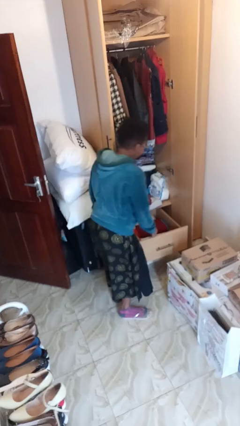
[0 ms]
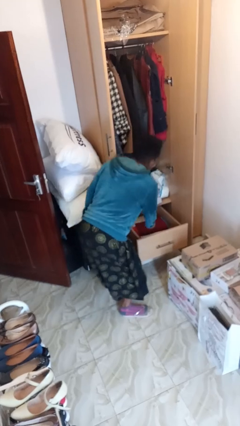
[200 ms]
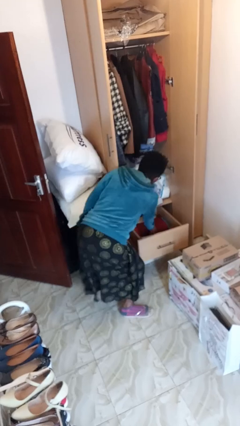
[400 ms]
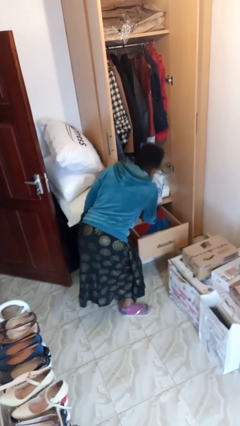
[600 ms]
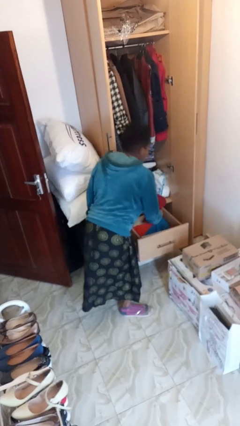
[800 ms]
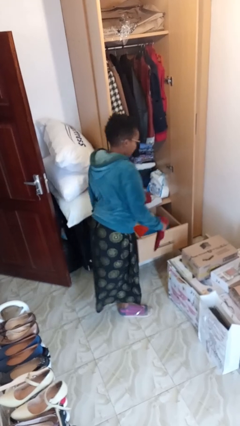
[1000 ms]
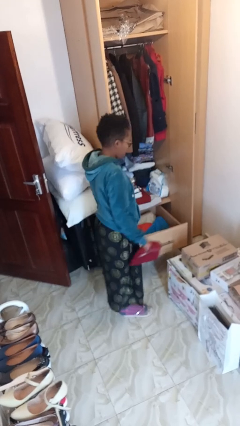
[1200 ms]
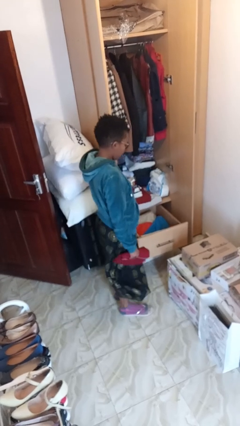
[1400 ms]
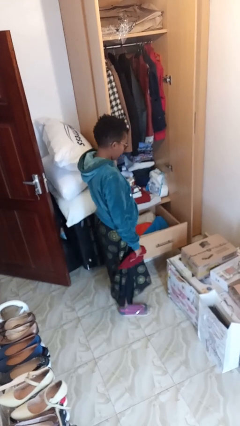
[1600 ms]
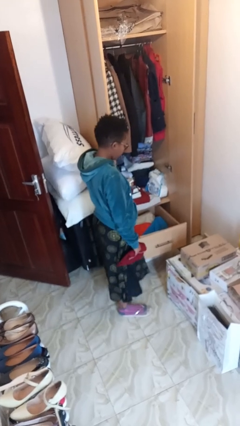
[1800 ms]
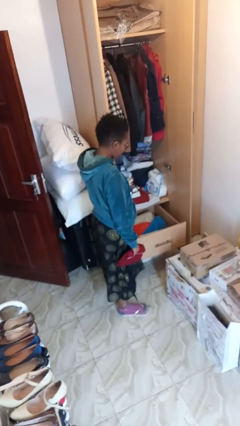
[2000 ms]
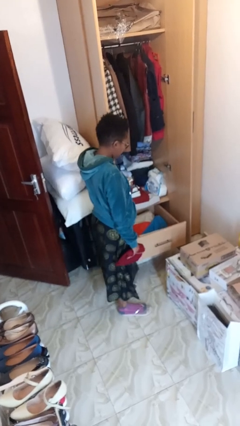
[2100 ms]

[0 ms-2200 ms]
person takes clothes from dresser

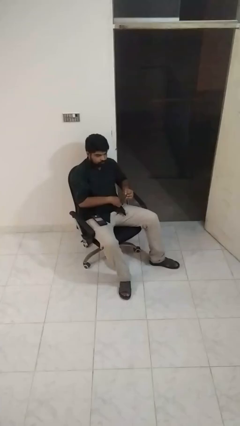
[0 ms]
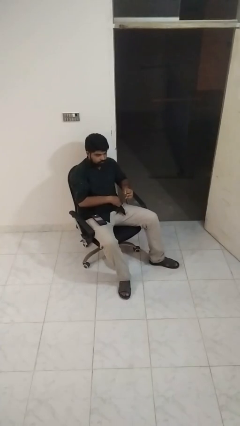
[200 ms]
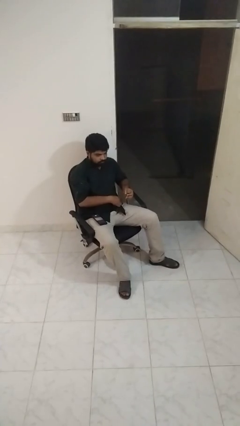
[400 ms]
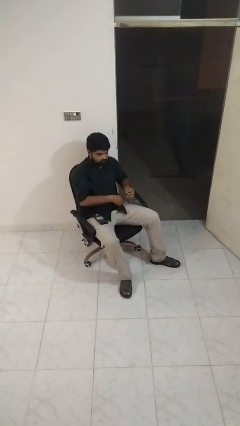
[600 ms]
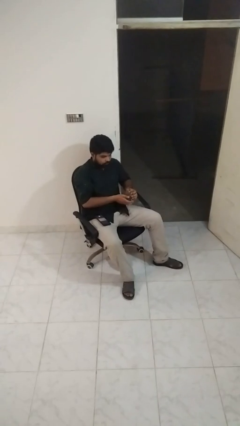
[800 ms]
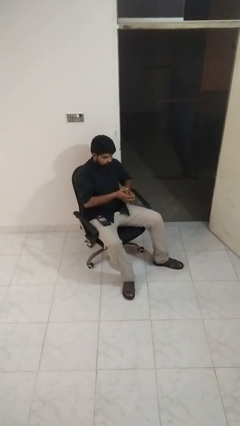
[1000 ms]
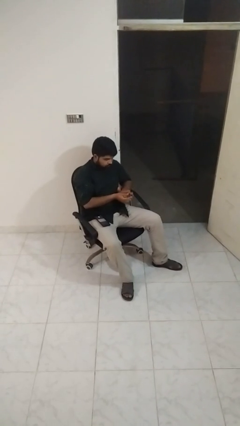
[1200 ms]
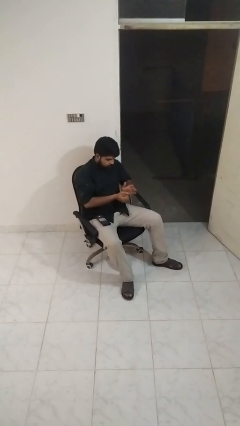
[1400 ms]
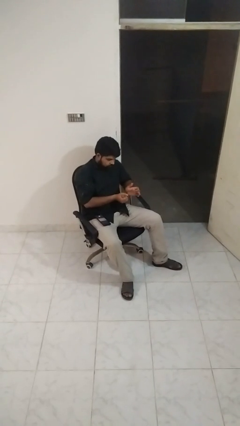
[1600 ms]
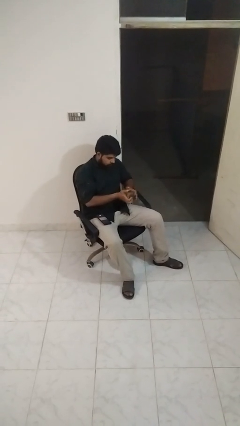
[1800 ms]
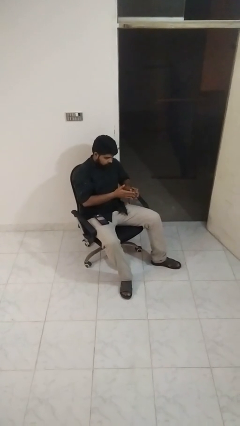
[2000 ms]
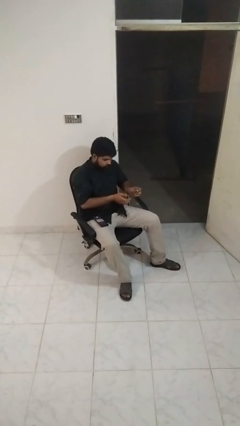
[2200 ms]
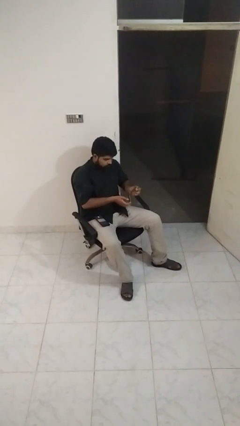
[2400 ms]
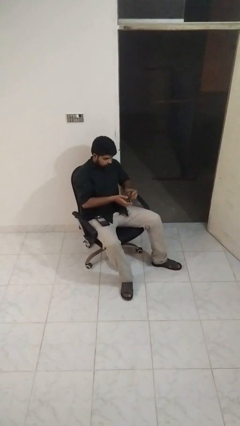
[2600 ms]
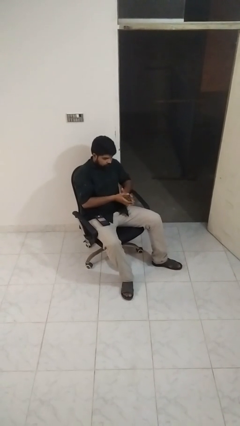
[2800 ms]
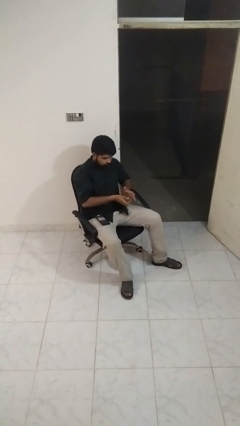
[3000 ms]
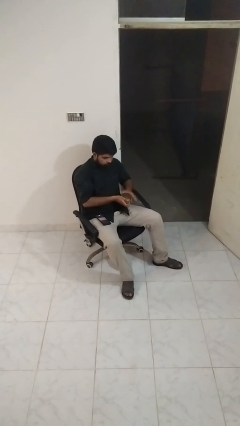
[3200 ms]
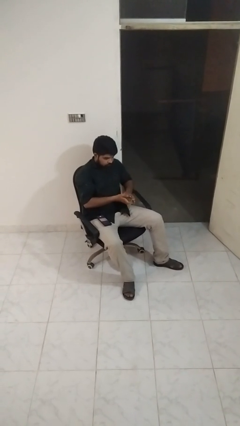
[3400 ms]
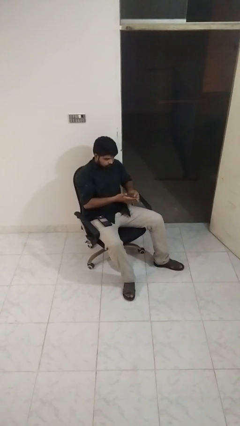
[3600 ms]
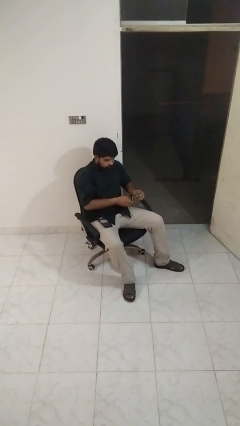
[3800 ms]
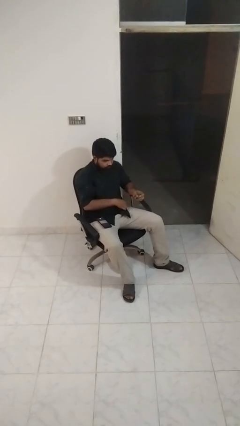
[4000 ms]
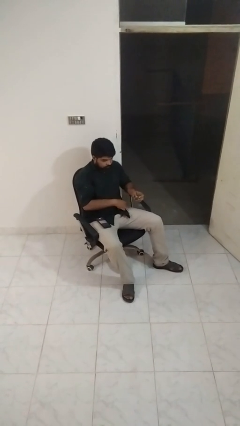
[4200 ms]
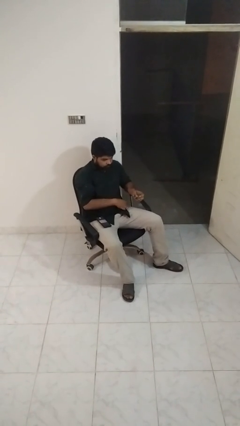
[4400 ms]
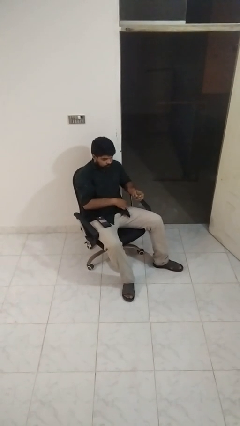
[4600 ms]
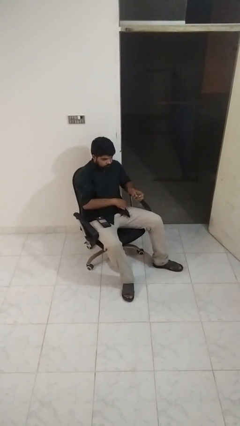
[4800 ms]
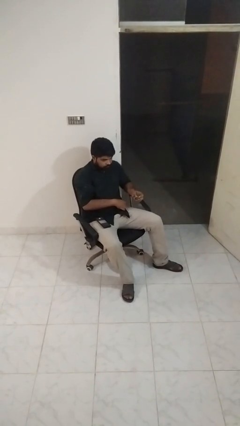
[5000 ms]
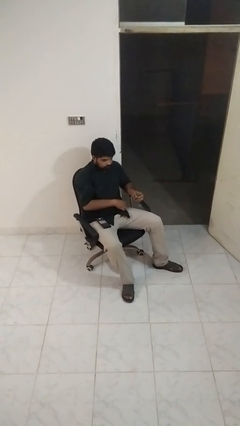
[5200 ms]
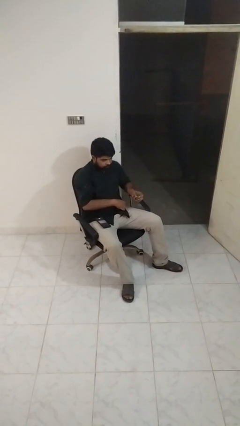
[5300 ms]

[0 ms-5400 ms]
person squeezes object

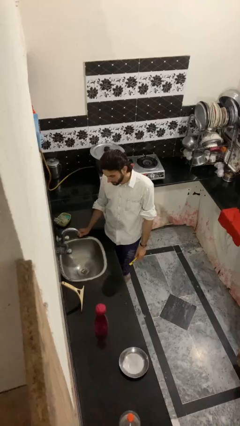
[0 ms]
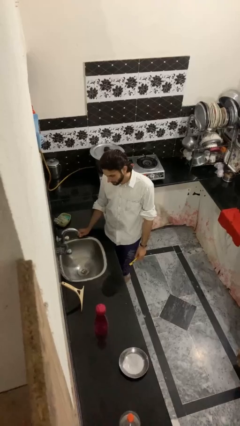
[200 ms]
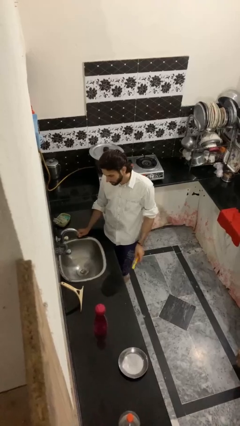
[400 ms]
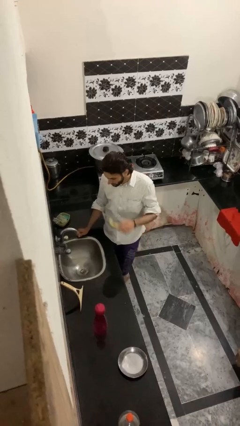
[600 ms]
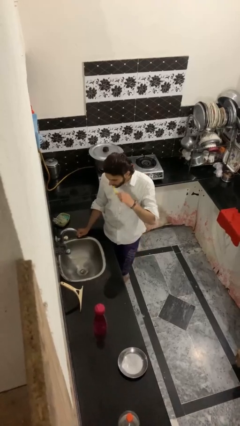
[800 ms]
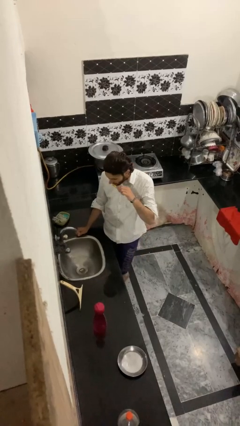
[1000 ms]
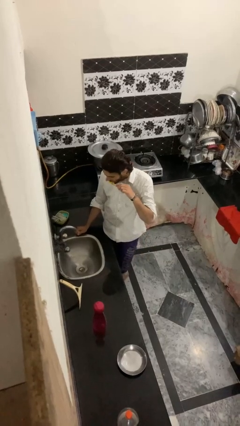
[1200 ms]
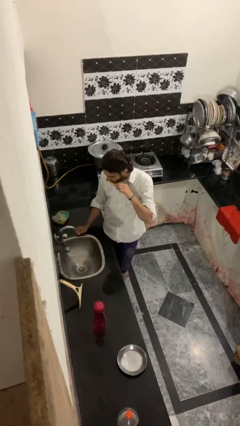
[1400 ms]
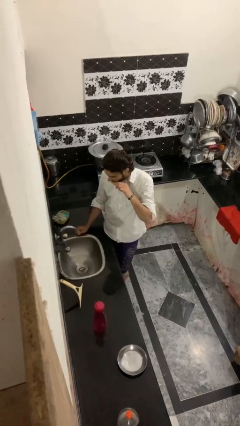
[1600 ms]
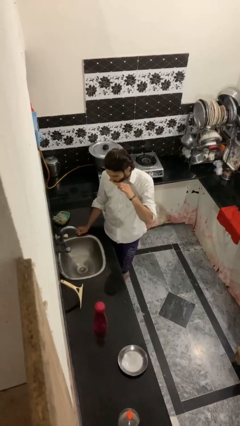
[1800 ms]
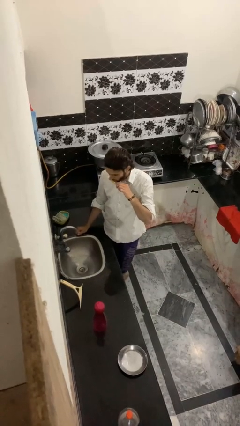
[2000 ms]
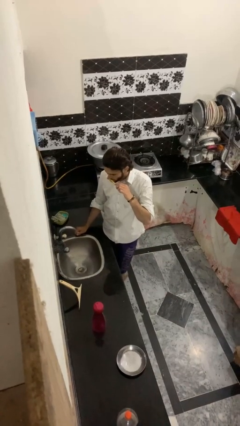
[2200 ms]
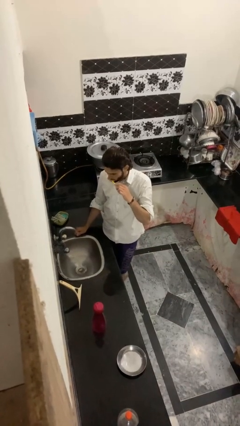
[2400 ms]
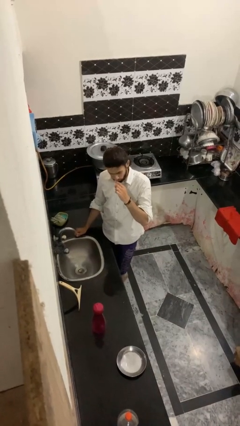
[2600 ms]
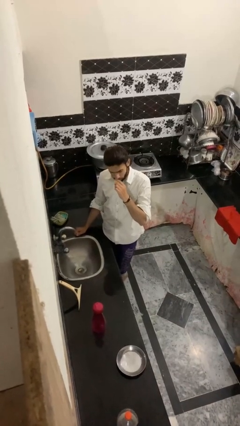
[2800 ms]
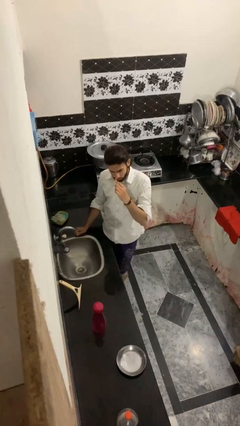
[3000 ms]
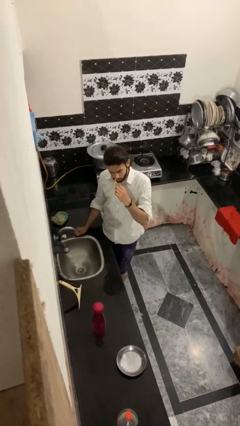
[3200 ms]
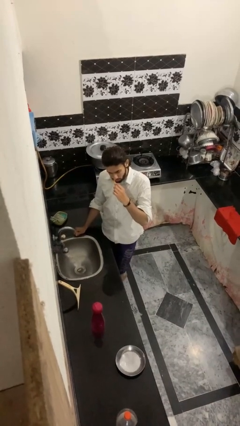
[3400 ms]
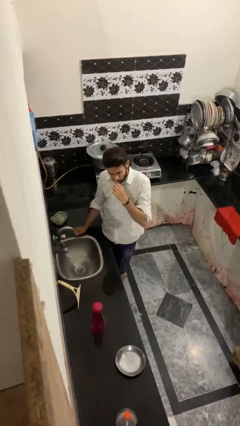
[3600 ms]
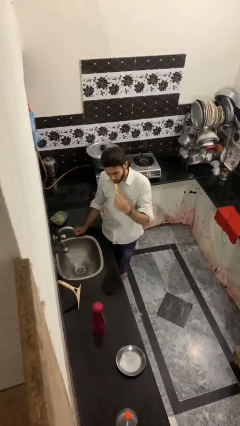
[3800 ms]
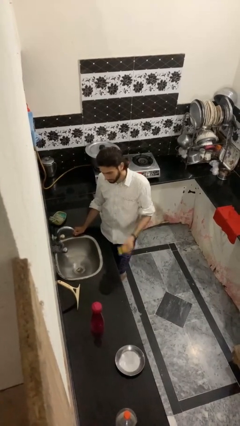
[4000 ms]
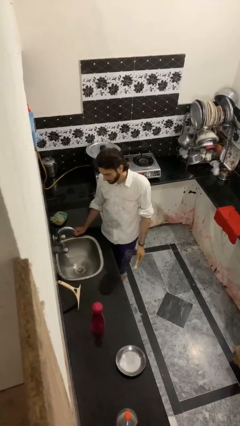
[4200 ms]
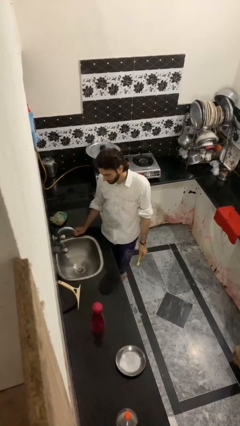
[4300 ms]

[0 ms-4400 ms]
person brushes teeth

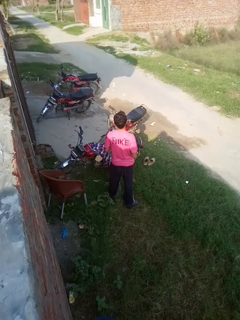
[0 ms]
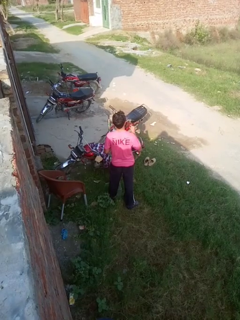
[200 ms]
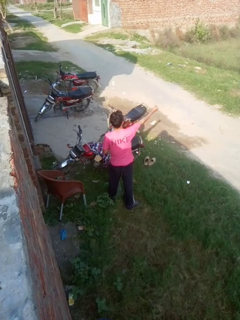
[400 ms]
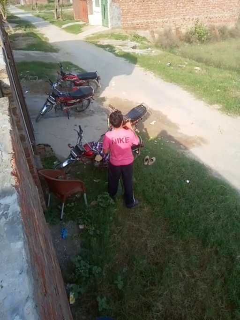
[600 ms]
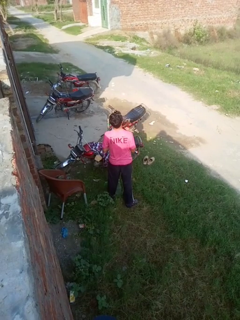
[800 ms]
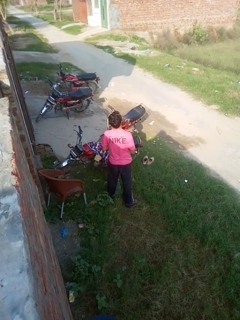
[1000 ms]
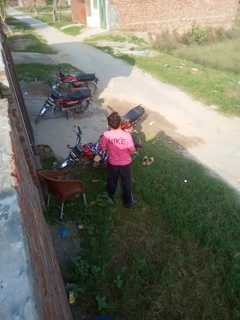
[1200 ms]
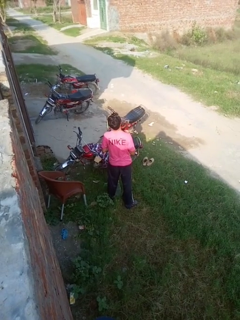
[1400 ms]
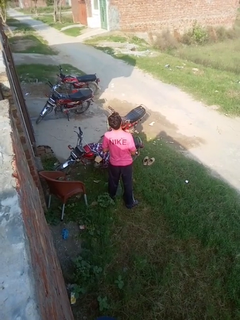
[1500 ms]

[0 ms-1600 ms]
person punches

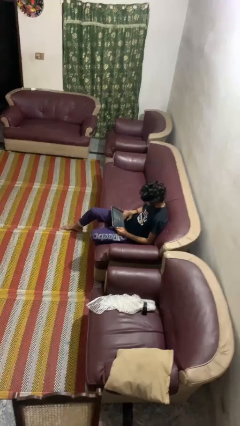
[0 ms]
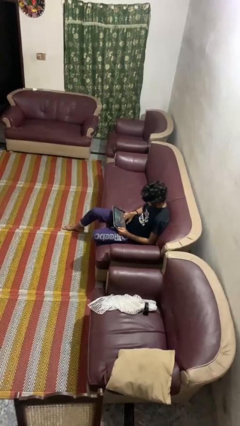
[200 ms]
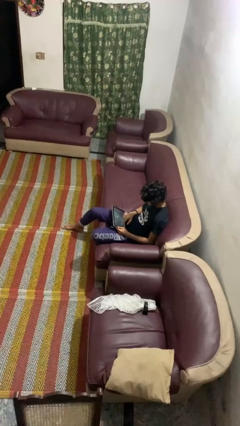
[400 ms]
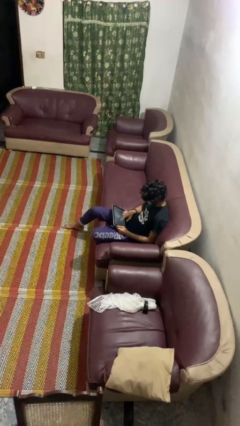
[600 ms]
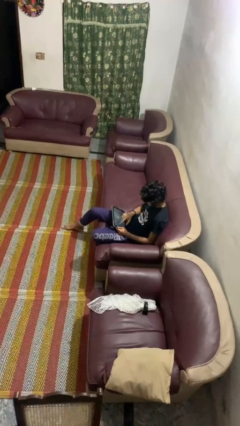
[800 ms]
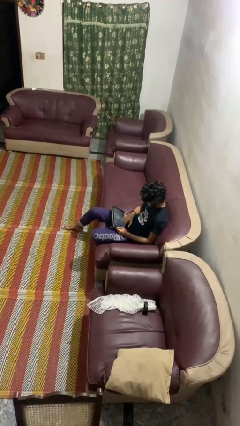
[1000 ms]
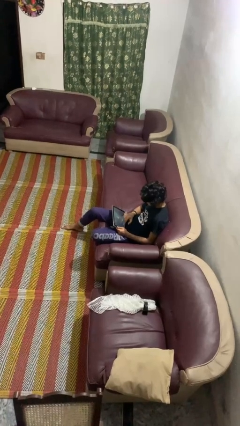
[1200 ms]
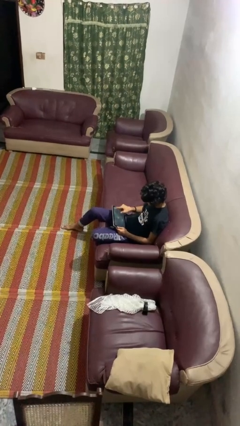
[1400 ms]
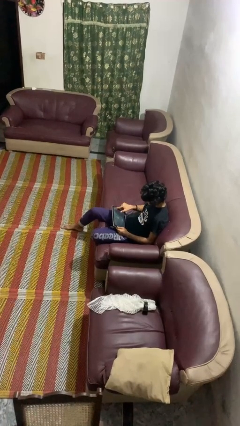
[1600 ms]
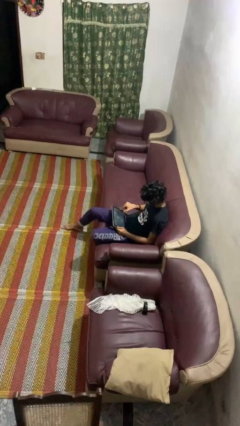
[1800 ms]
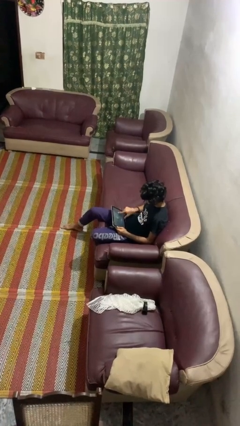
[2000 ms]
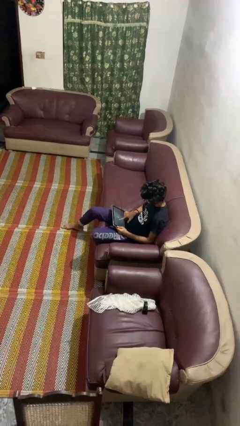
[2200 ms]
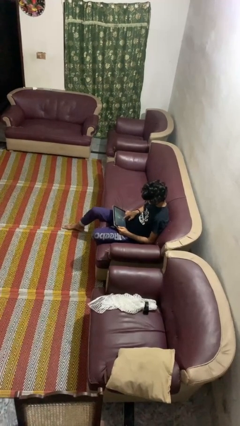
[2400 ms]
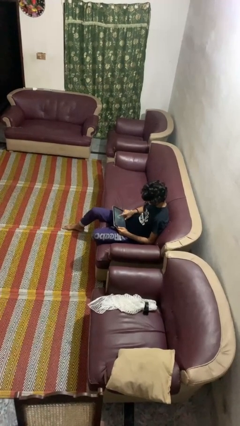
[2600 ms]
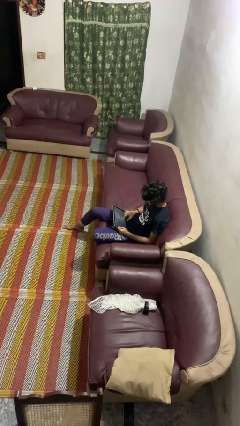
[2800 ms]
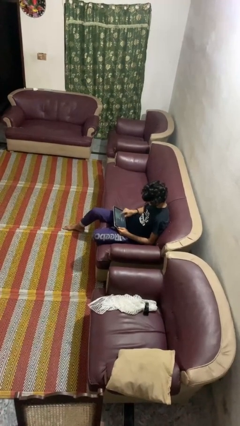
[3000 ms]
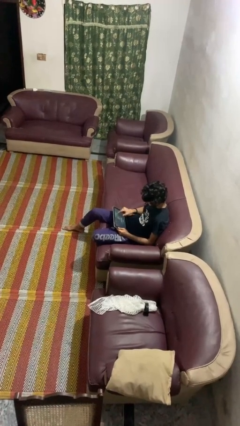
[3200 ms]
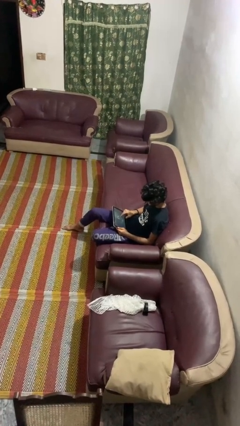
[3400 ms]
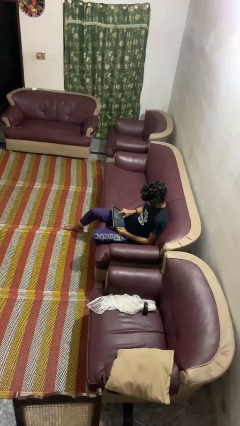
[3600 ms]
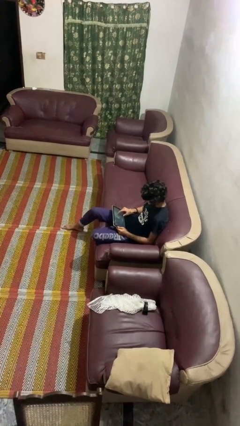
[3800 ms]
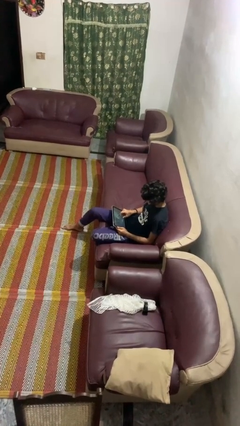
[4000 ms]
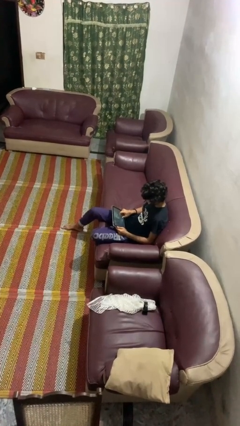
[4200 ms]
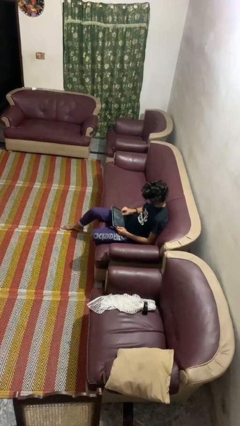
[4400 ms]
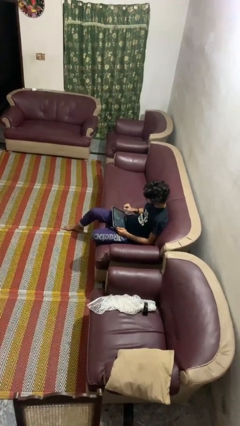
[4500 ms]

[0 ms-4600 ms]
person interacts with tablet

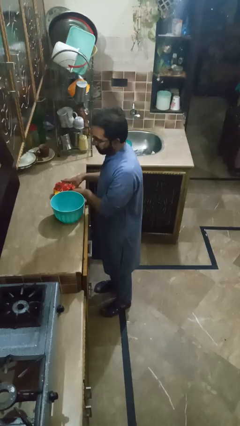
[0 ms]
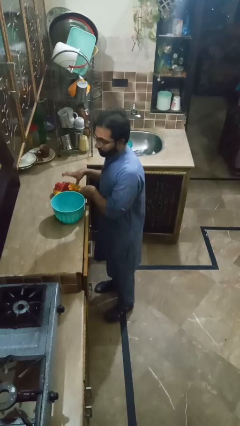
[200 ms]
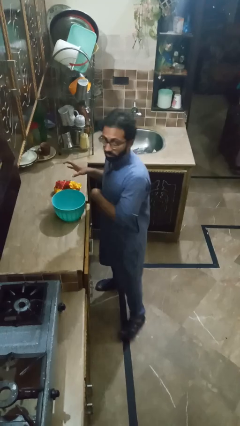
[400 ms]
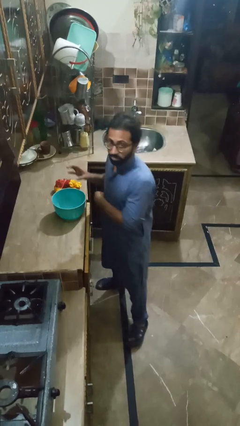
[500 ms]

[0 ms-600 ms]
person pours into bowl
